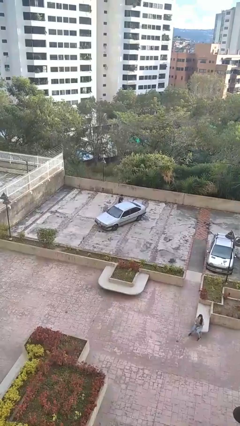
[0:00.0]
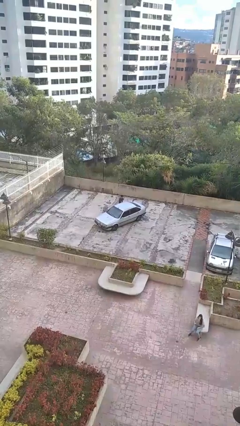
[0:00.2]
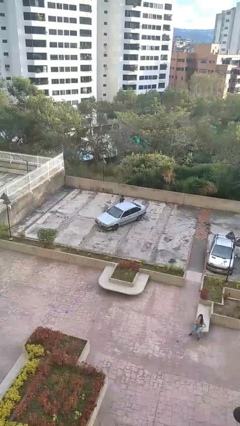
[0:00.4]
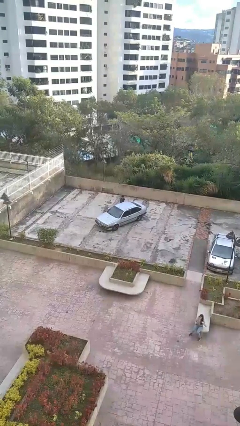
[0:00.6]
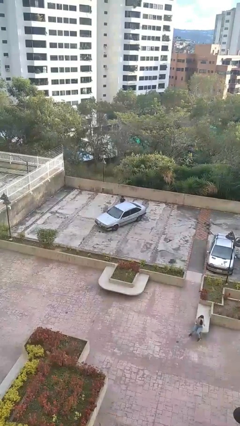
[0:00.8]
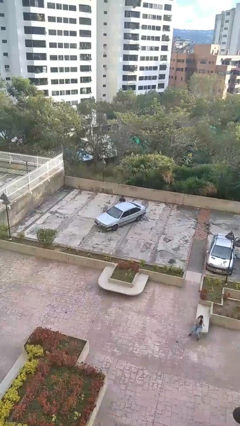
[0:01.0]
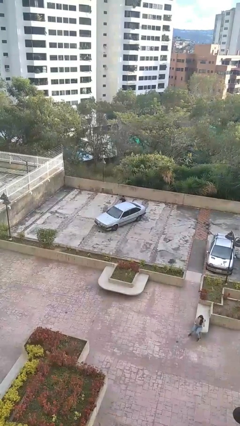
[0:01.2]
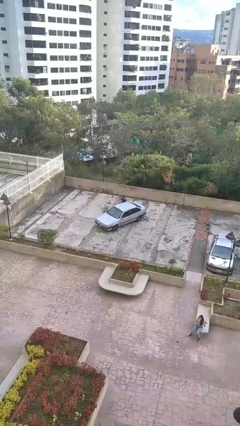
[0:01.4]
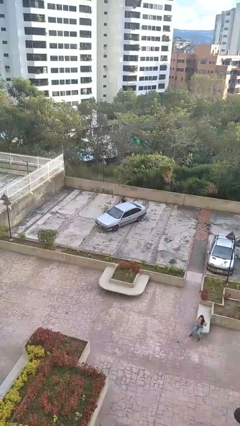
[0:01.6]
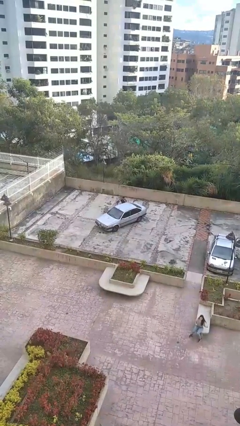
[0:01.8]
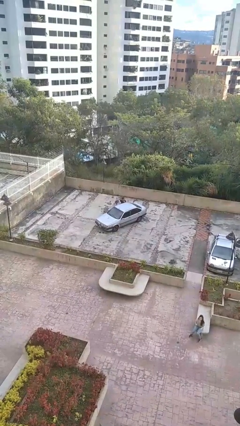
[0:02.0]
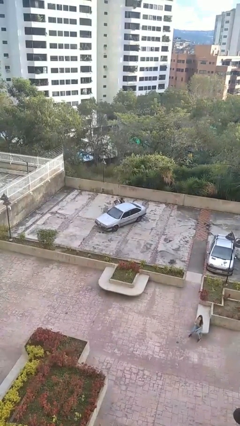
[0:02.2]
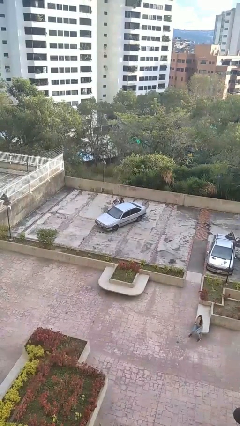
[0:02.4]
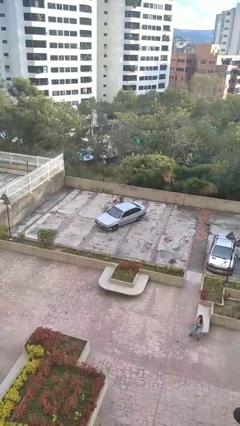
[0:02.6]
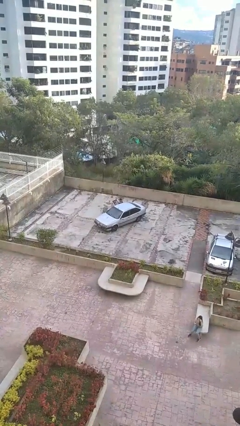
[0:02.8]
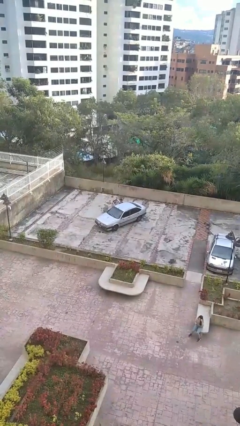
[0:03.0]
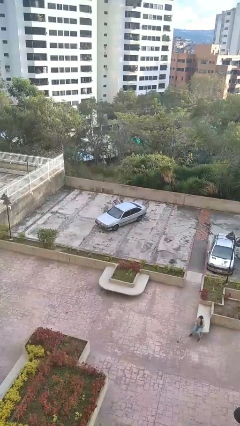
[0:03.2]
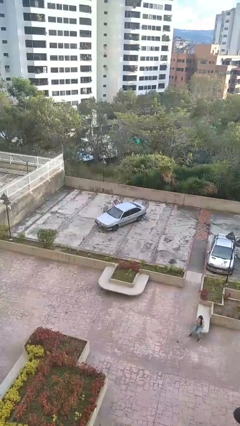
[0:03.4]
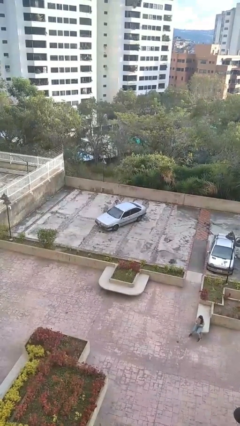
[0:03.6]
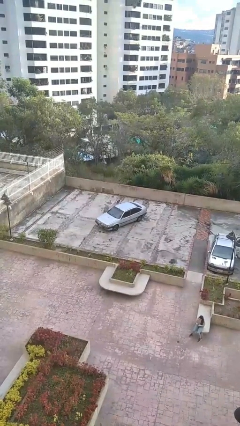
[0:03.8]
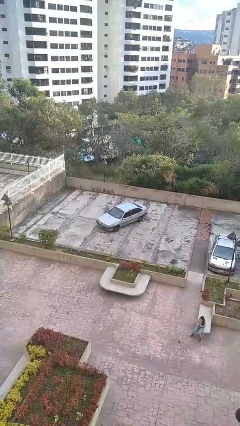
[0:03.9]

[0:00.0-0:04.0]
car picks up person

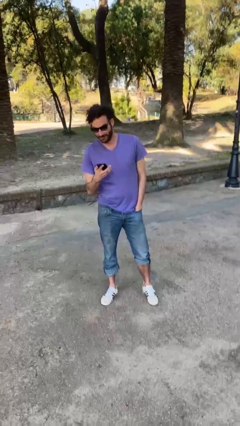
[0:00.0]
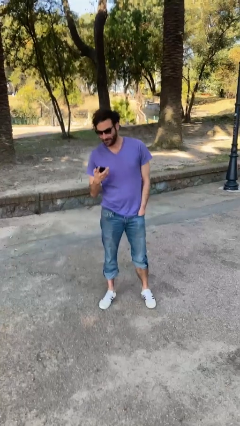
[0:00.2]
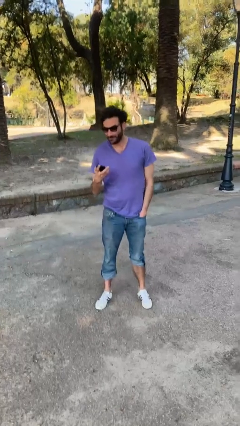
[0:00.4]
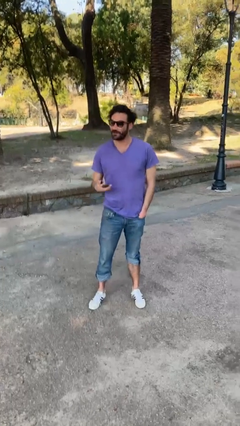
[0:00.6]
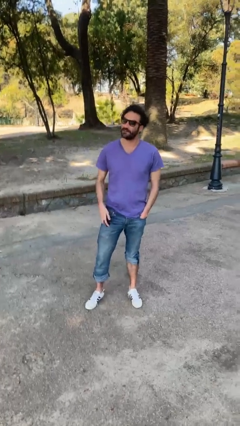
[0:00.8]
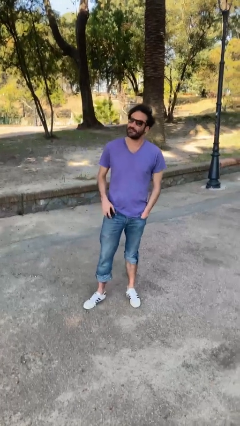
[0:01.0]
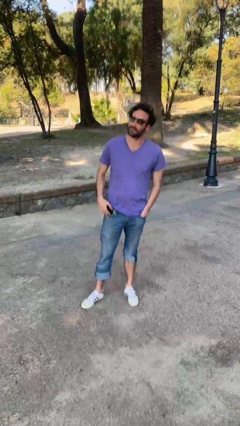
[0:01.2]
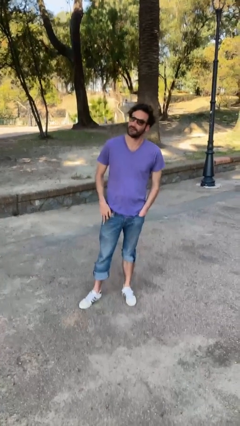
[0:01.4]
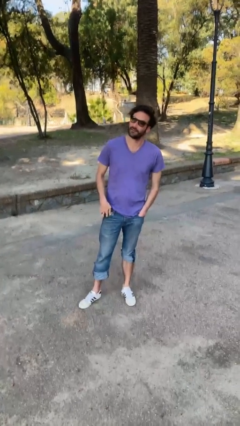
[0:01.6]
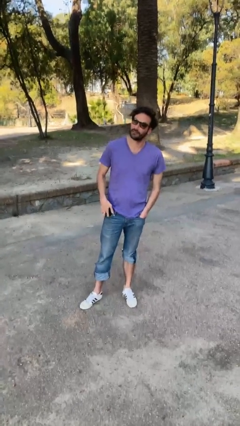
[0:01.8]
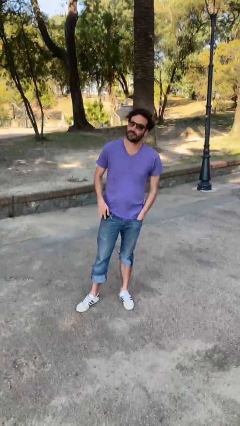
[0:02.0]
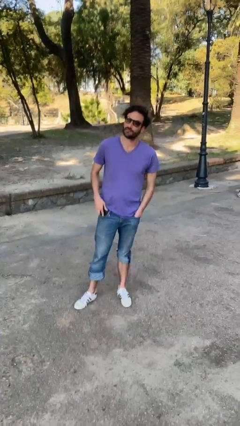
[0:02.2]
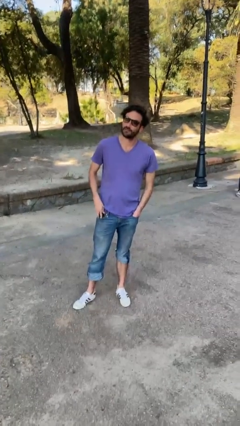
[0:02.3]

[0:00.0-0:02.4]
person puts phone into pocket

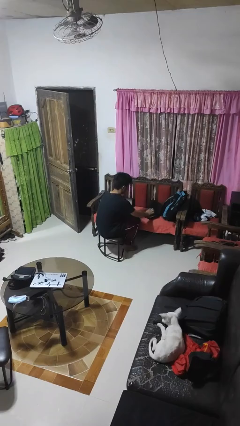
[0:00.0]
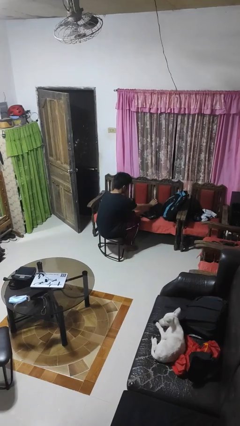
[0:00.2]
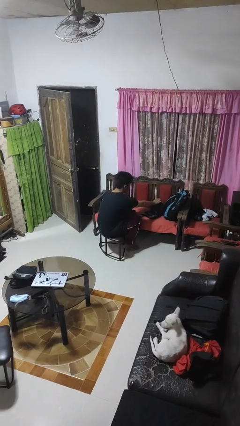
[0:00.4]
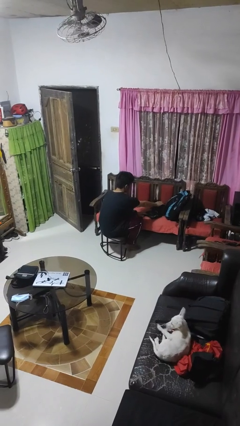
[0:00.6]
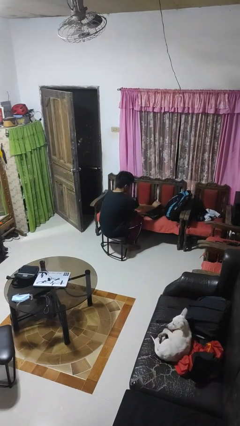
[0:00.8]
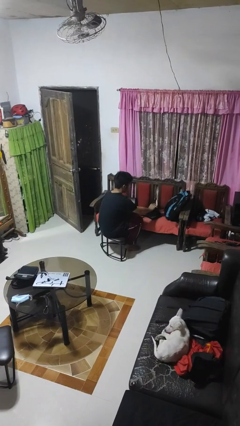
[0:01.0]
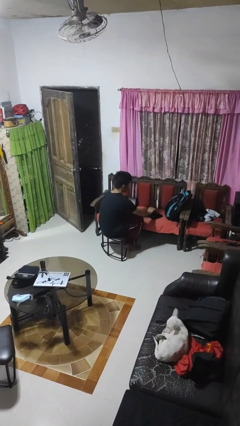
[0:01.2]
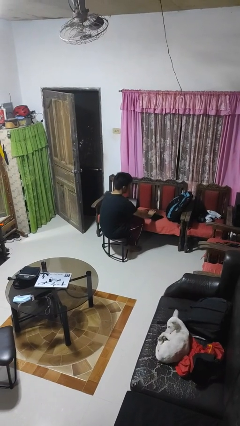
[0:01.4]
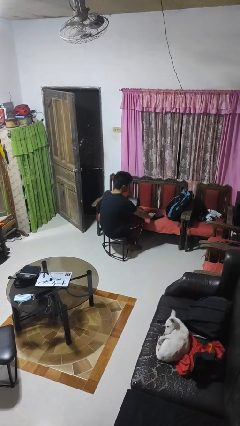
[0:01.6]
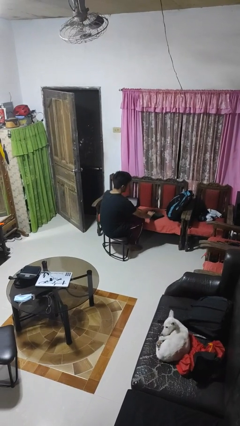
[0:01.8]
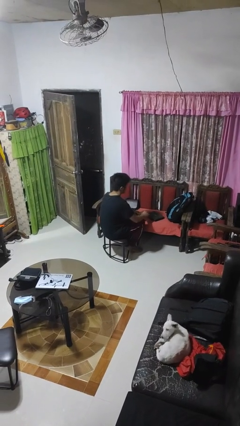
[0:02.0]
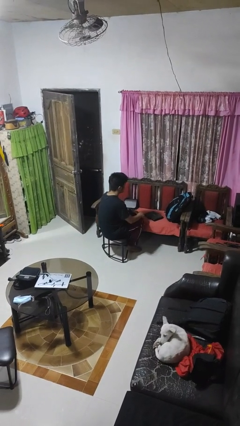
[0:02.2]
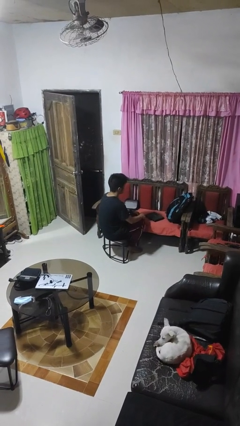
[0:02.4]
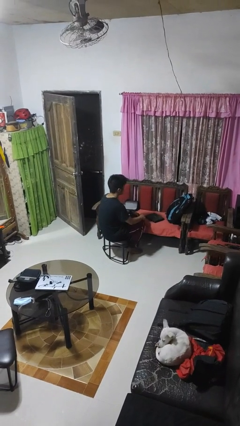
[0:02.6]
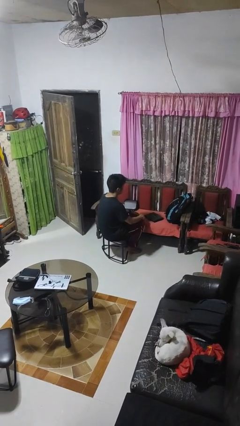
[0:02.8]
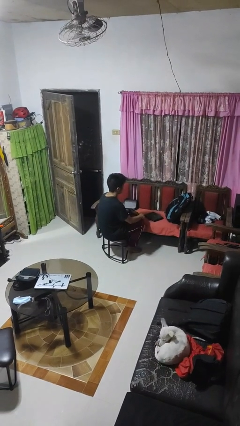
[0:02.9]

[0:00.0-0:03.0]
person closes laptop

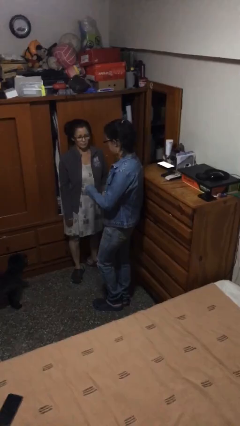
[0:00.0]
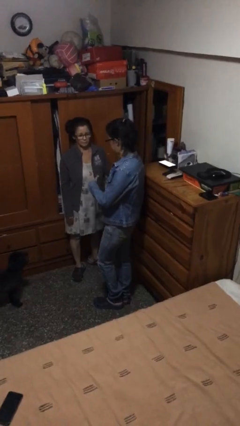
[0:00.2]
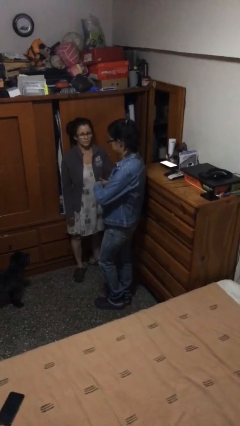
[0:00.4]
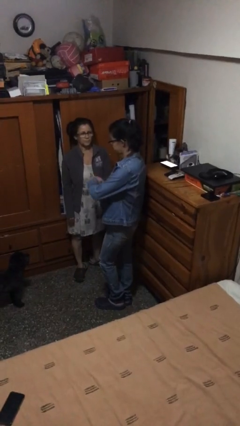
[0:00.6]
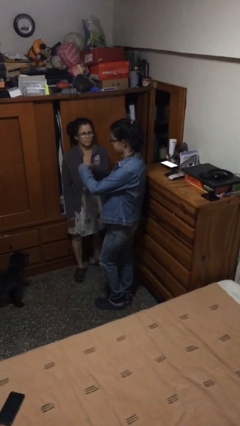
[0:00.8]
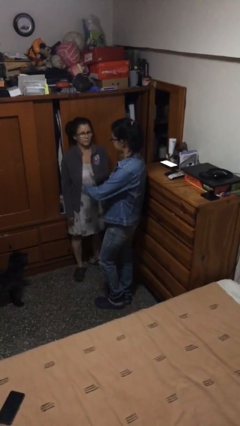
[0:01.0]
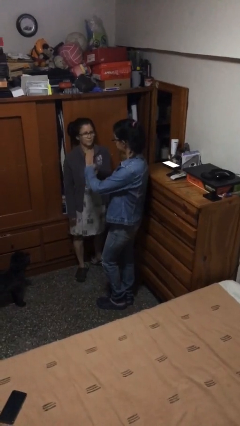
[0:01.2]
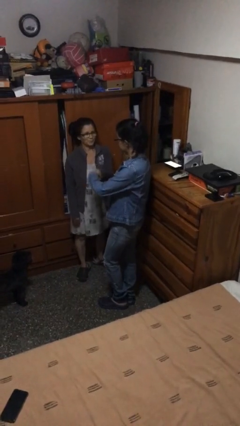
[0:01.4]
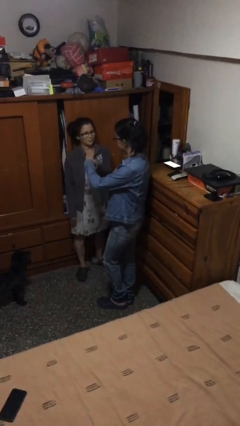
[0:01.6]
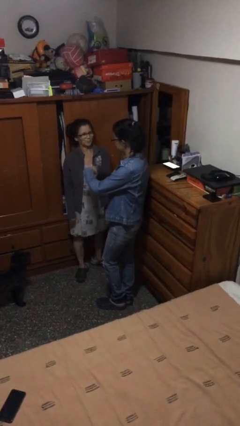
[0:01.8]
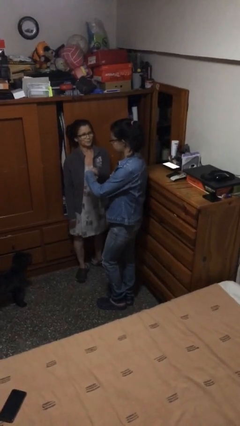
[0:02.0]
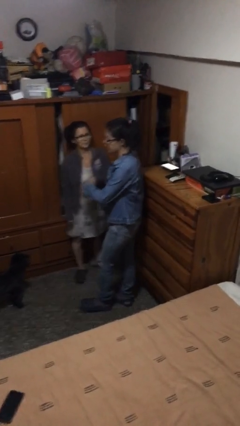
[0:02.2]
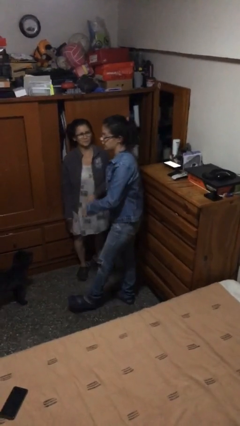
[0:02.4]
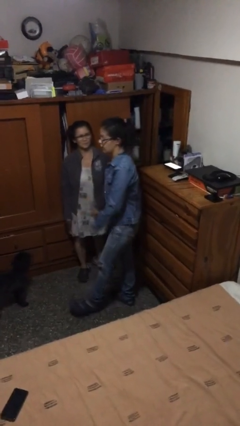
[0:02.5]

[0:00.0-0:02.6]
person shakes hand

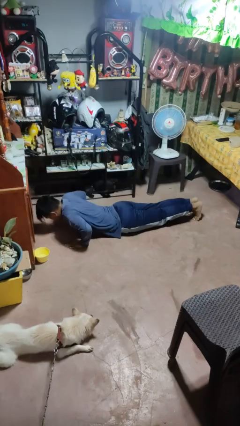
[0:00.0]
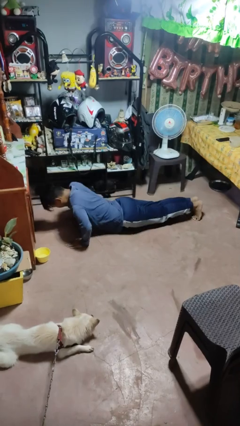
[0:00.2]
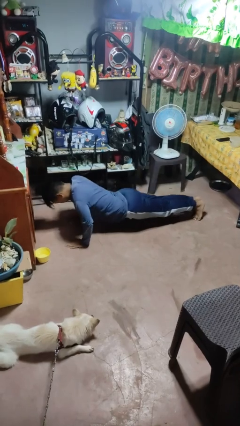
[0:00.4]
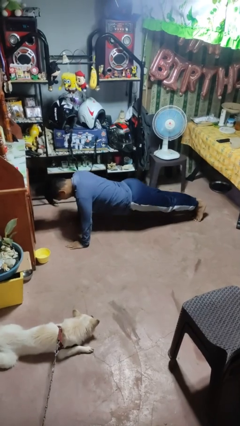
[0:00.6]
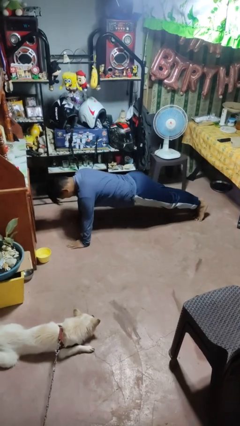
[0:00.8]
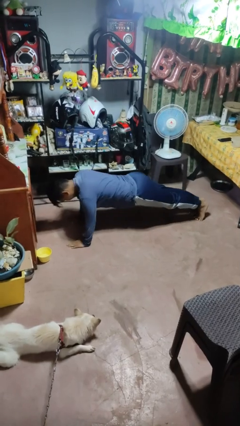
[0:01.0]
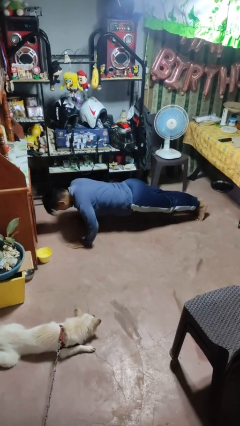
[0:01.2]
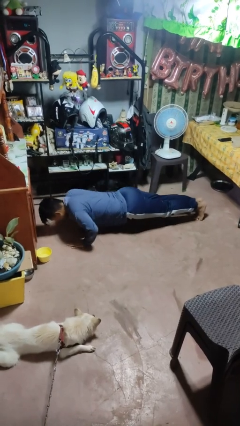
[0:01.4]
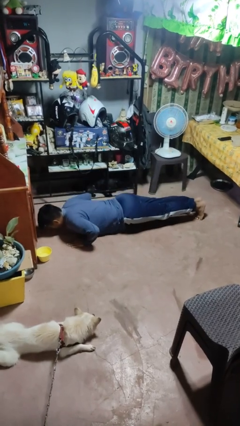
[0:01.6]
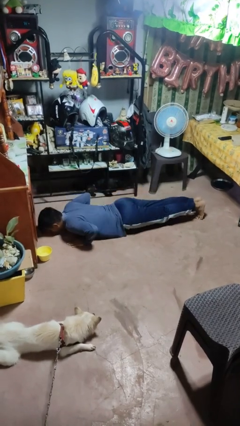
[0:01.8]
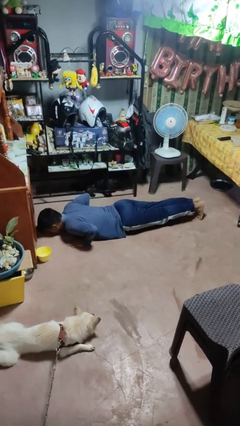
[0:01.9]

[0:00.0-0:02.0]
person exercises with pushup

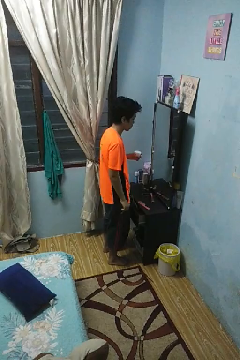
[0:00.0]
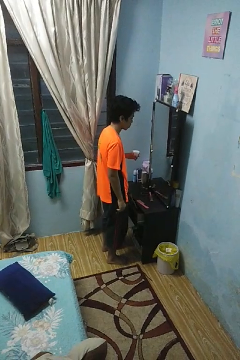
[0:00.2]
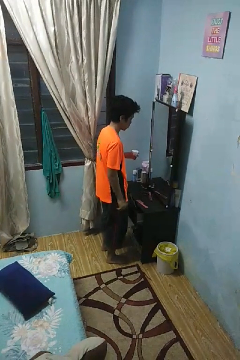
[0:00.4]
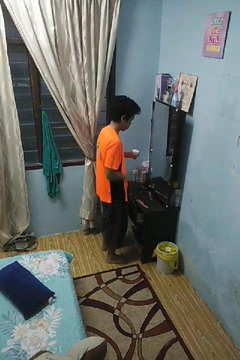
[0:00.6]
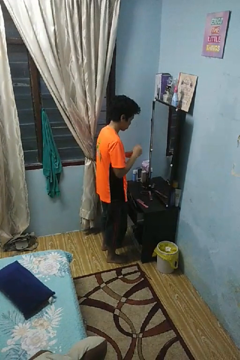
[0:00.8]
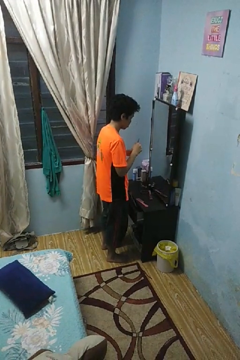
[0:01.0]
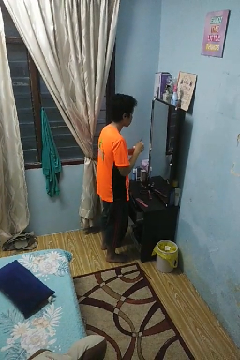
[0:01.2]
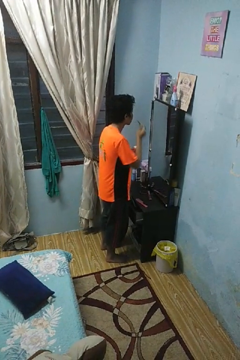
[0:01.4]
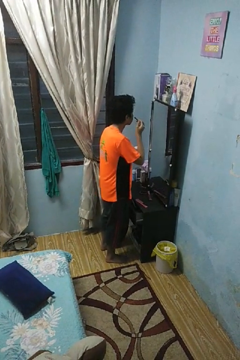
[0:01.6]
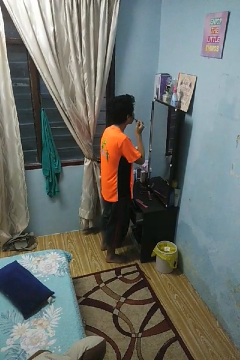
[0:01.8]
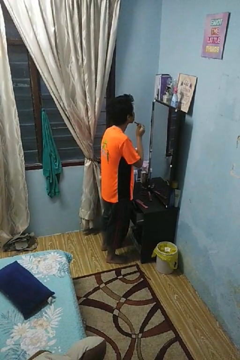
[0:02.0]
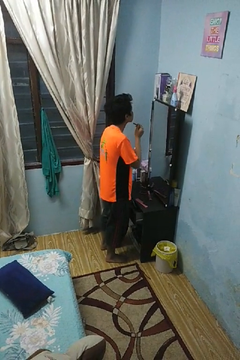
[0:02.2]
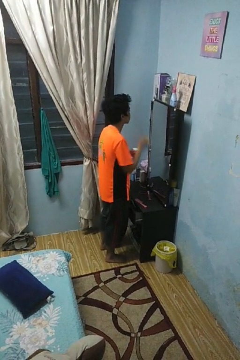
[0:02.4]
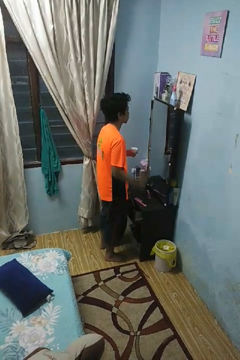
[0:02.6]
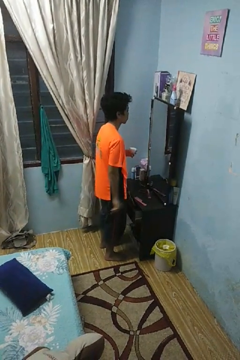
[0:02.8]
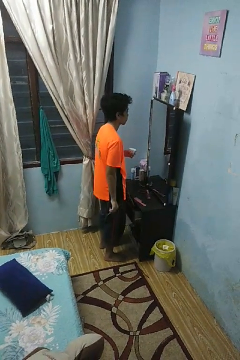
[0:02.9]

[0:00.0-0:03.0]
person applies foundation makeup

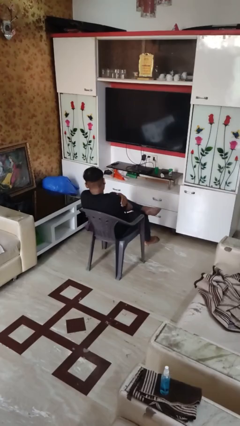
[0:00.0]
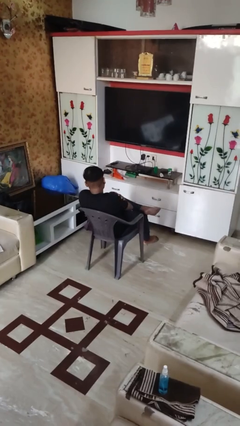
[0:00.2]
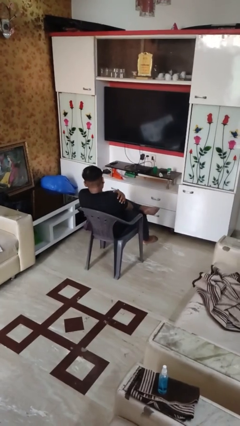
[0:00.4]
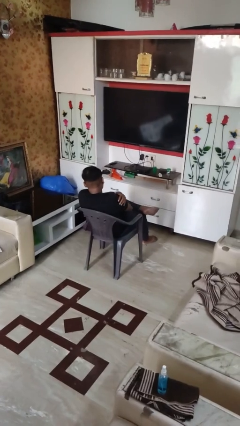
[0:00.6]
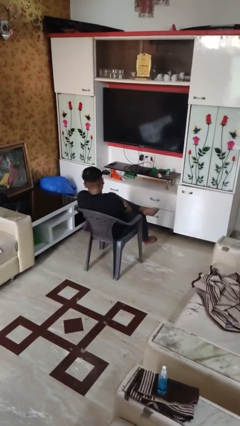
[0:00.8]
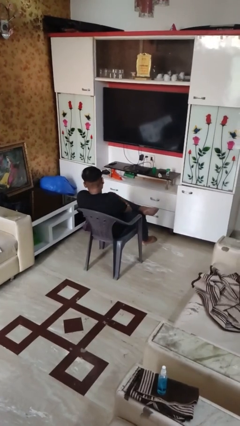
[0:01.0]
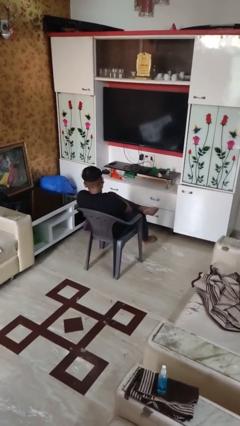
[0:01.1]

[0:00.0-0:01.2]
person swats bug
